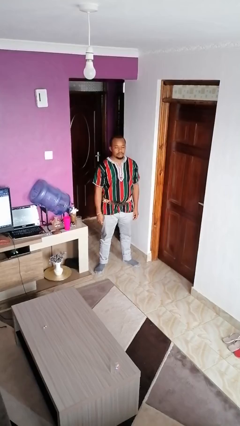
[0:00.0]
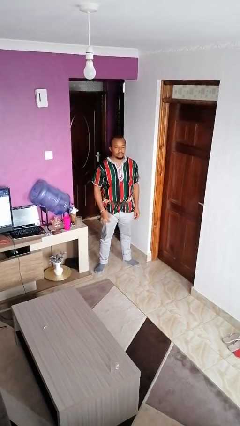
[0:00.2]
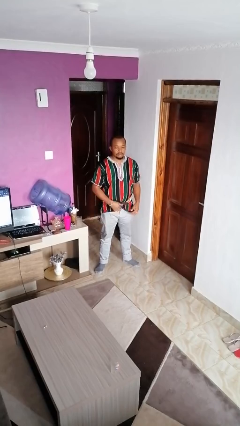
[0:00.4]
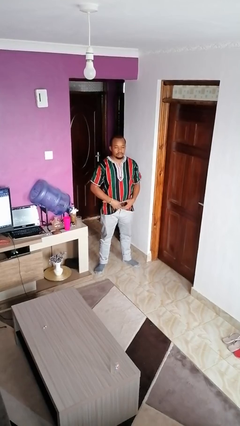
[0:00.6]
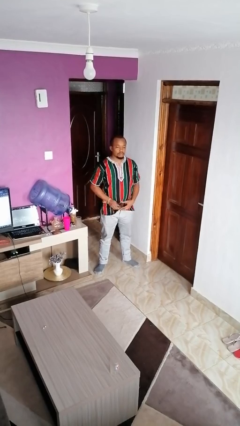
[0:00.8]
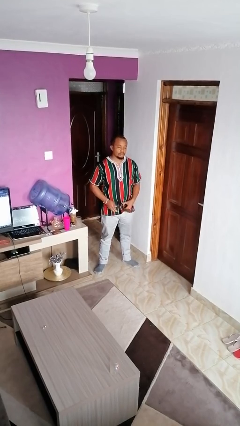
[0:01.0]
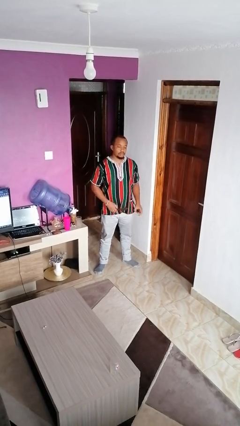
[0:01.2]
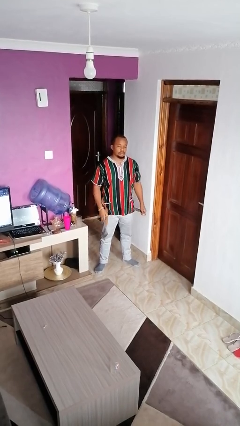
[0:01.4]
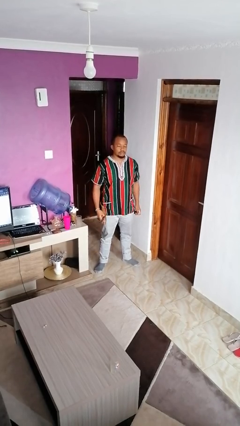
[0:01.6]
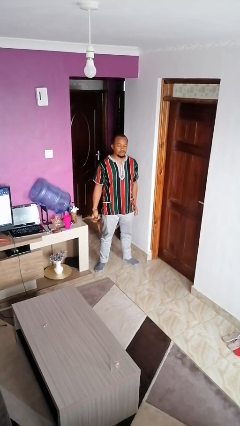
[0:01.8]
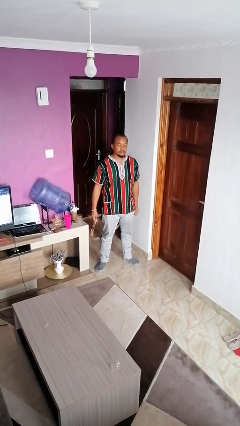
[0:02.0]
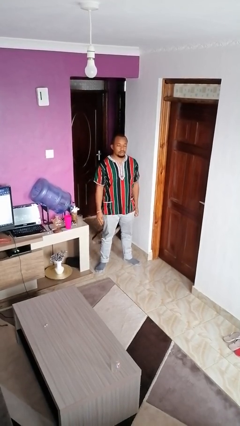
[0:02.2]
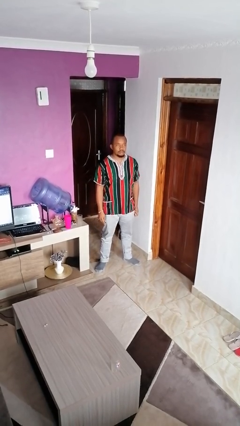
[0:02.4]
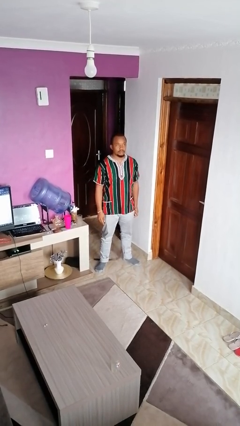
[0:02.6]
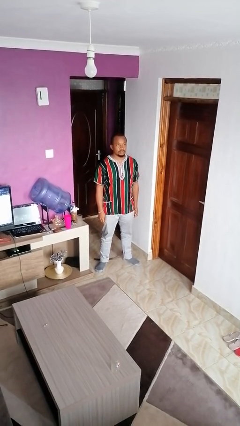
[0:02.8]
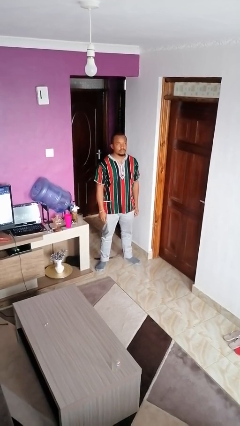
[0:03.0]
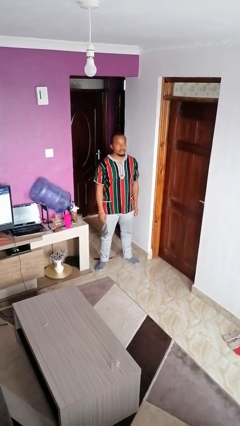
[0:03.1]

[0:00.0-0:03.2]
person takes off belt

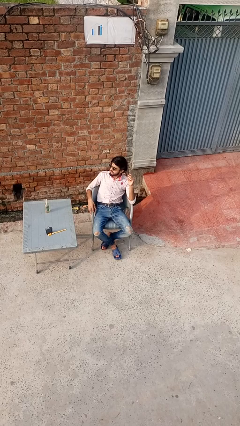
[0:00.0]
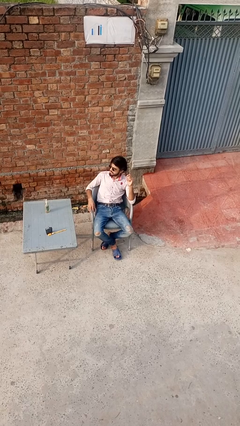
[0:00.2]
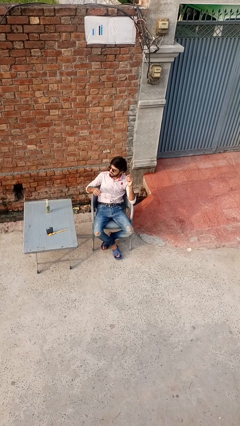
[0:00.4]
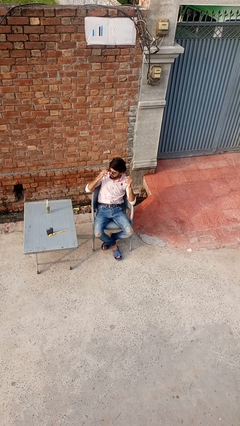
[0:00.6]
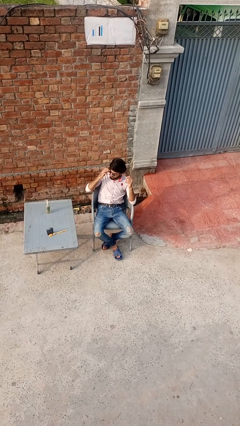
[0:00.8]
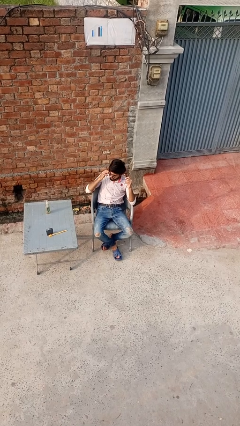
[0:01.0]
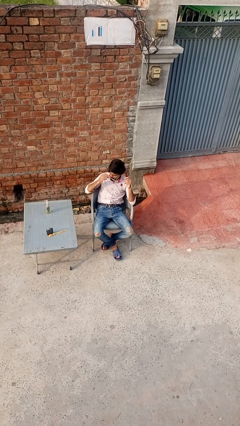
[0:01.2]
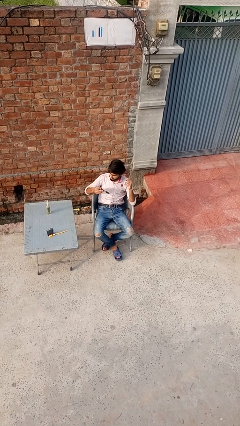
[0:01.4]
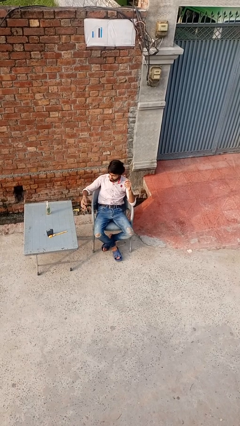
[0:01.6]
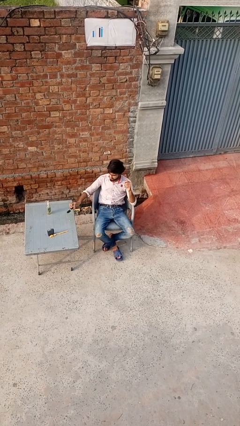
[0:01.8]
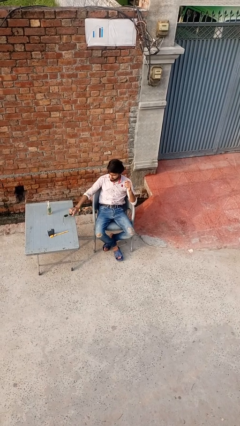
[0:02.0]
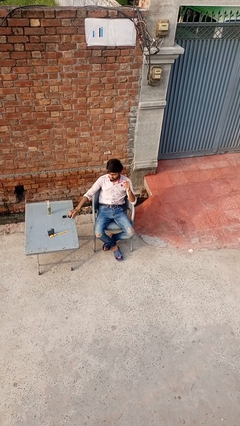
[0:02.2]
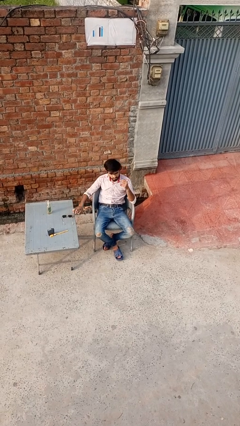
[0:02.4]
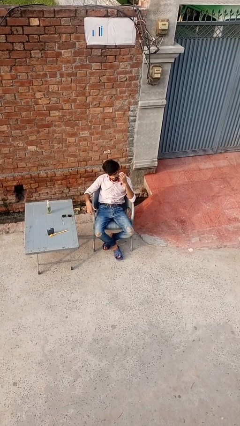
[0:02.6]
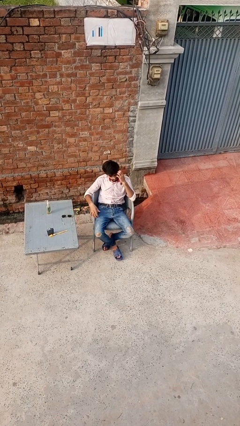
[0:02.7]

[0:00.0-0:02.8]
person takes off sunglasses

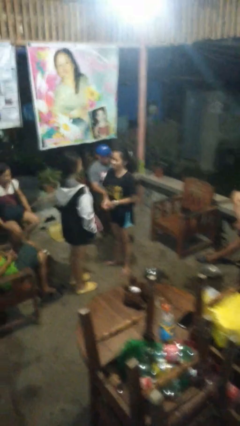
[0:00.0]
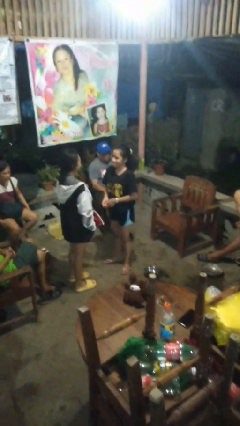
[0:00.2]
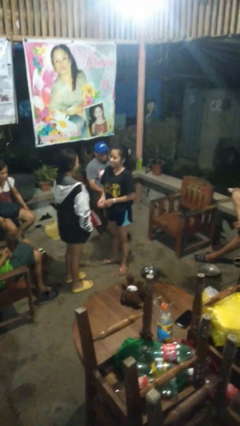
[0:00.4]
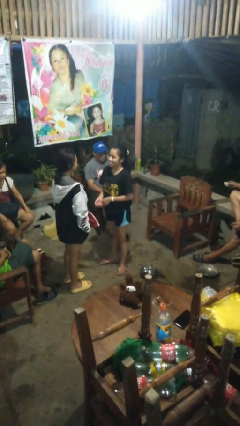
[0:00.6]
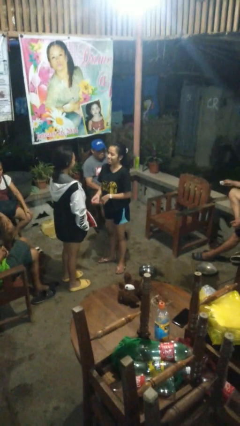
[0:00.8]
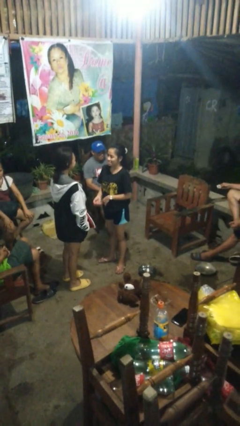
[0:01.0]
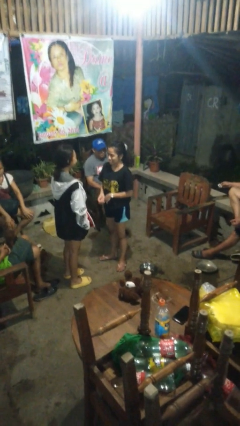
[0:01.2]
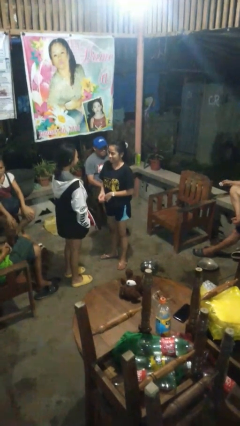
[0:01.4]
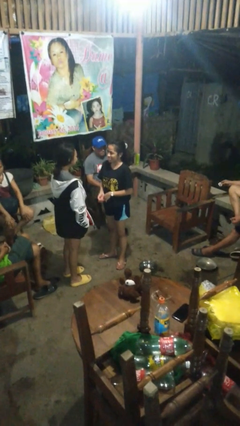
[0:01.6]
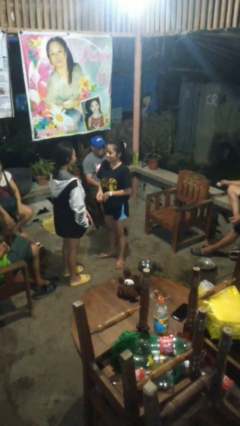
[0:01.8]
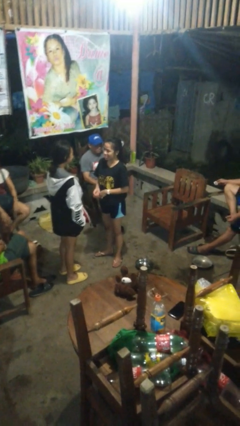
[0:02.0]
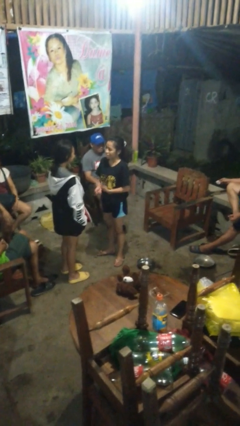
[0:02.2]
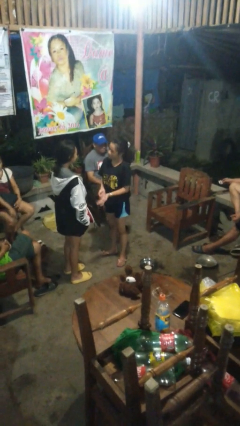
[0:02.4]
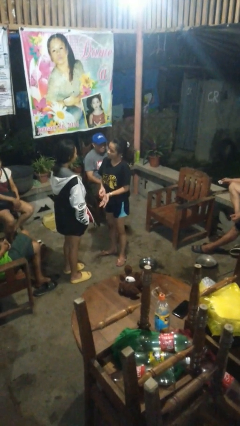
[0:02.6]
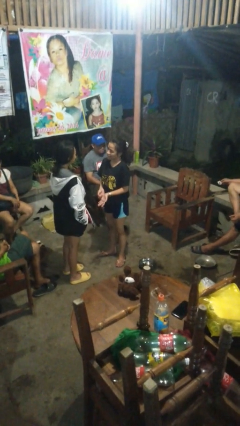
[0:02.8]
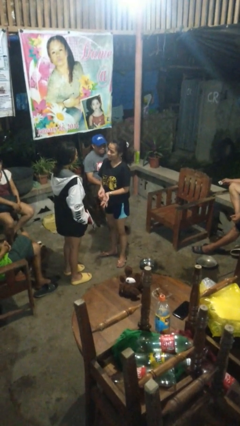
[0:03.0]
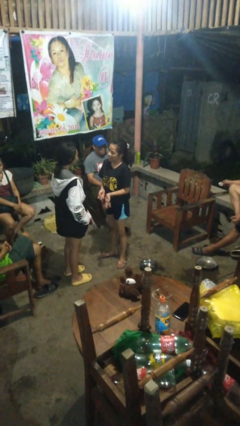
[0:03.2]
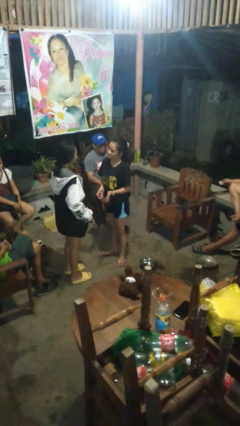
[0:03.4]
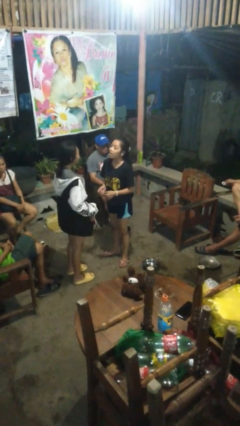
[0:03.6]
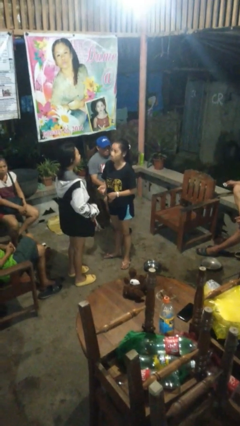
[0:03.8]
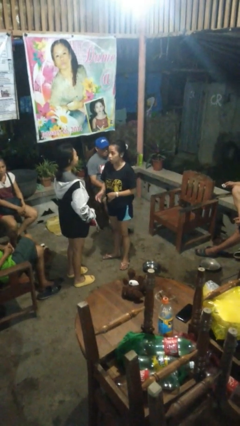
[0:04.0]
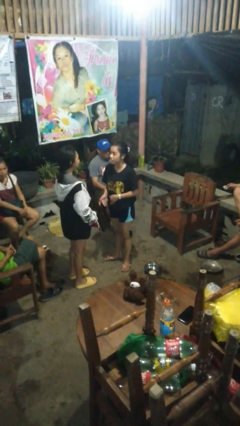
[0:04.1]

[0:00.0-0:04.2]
person talks to person

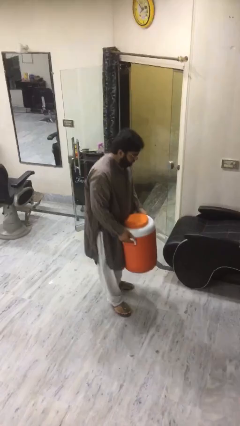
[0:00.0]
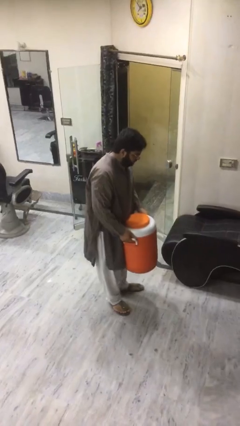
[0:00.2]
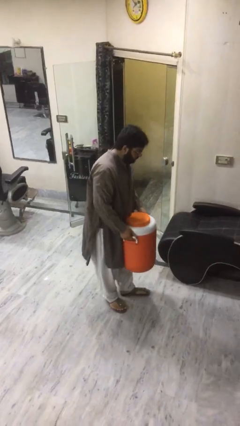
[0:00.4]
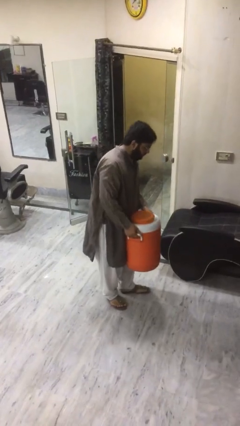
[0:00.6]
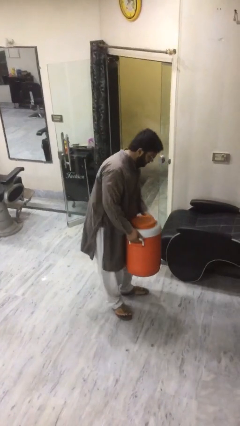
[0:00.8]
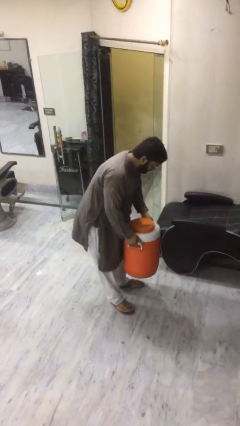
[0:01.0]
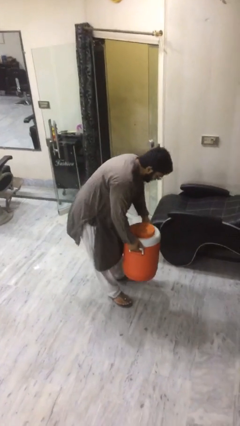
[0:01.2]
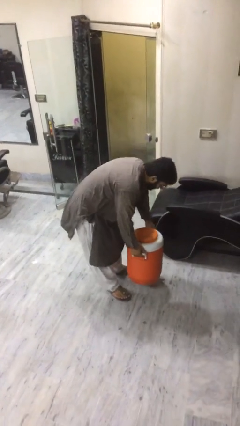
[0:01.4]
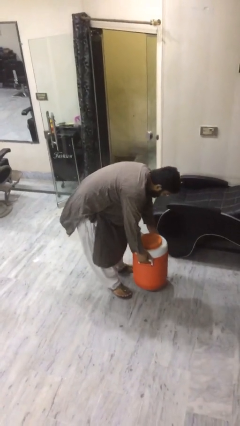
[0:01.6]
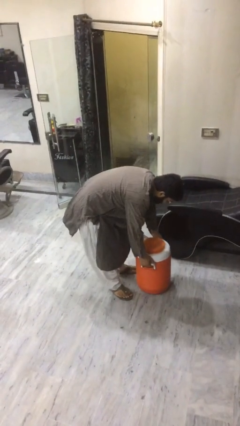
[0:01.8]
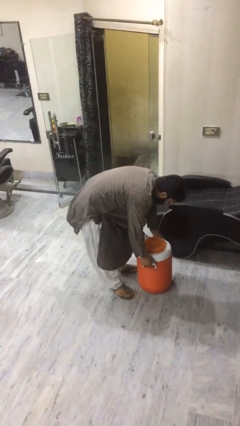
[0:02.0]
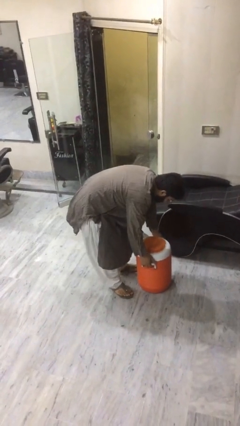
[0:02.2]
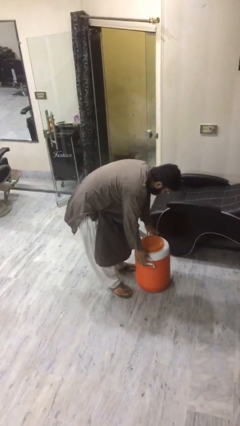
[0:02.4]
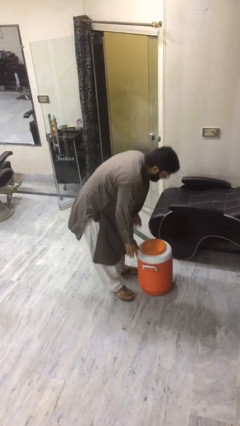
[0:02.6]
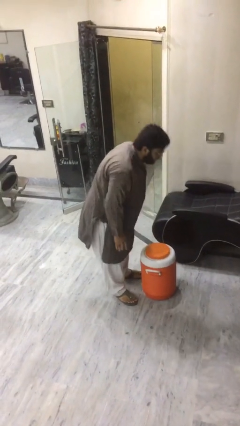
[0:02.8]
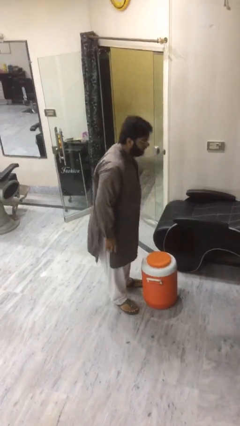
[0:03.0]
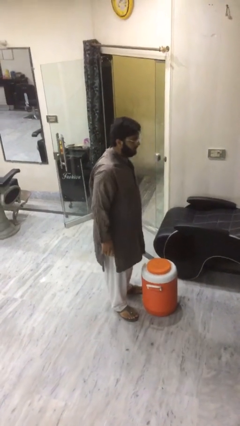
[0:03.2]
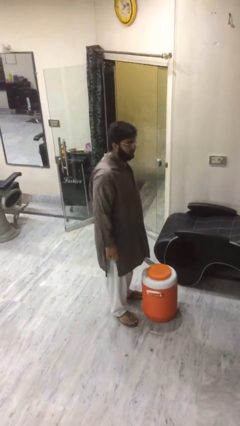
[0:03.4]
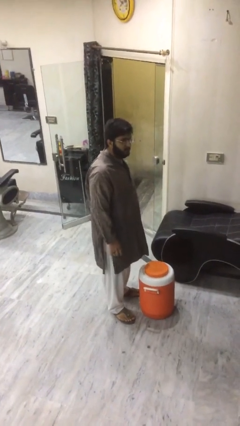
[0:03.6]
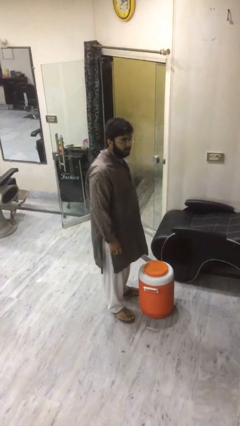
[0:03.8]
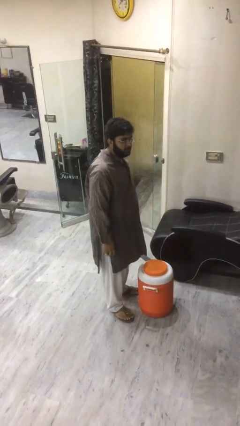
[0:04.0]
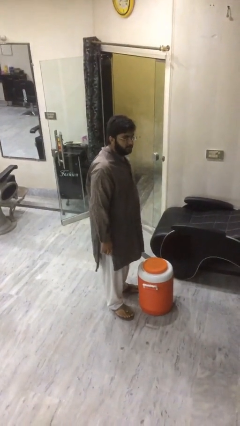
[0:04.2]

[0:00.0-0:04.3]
person puts down object on floor

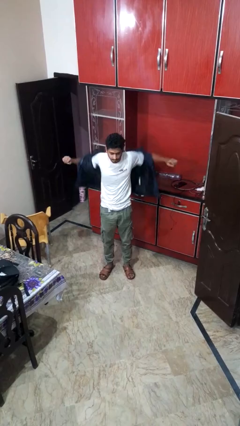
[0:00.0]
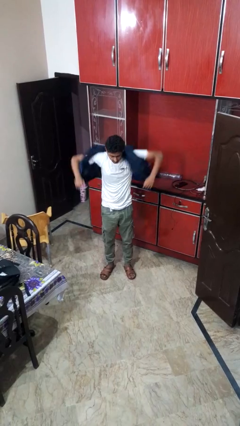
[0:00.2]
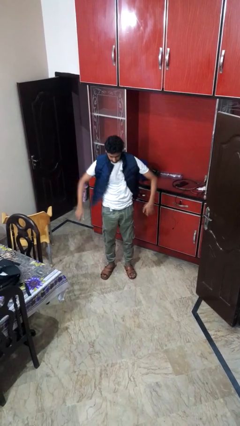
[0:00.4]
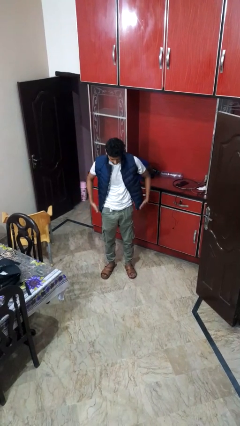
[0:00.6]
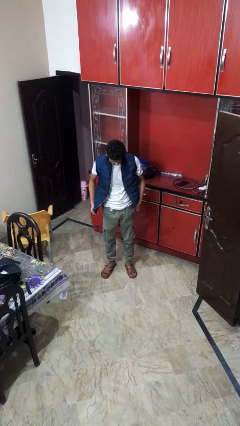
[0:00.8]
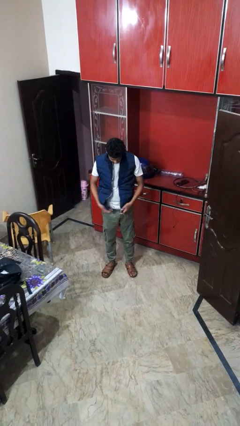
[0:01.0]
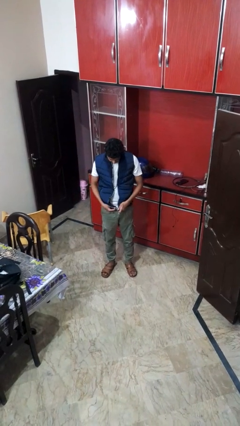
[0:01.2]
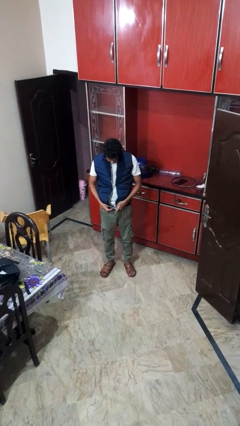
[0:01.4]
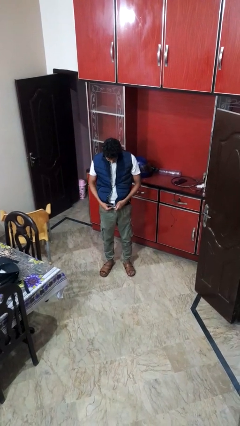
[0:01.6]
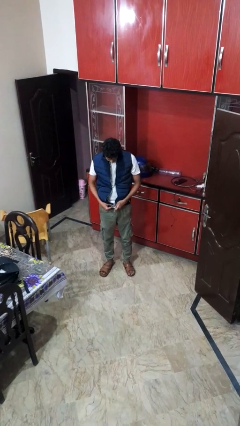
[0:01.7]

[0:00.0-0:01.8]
person puts on jacket

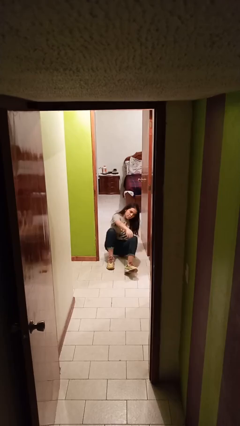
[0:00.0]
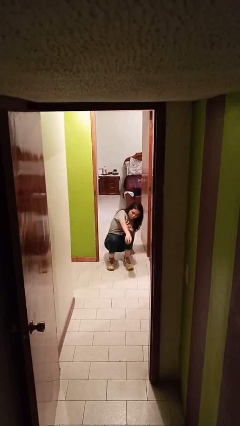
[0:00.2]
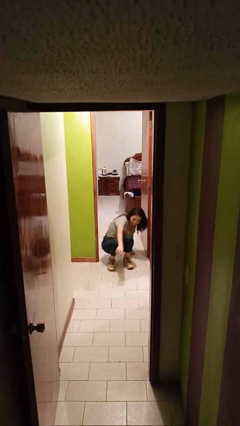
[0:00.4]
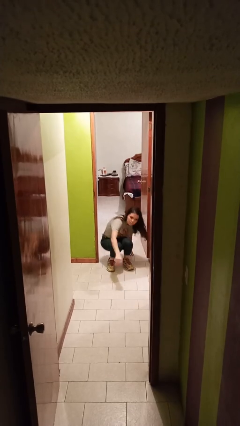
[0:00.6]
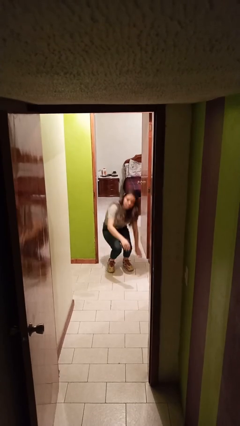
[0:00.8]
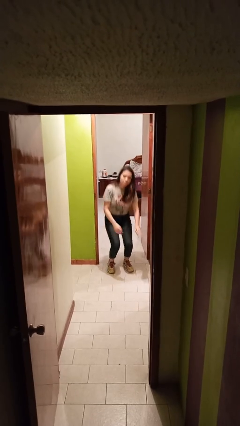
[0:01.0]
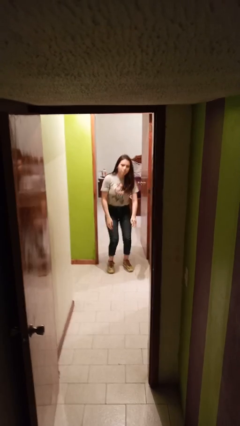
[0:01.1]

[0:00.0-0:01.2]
person stands up
